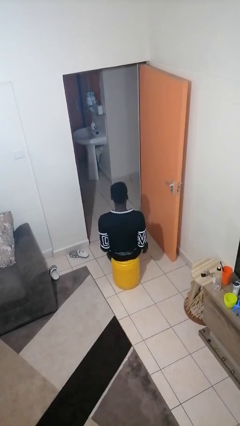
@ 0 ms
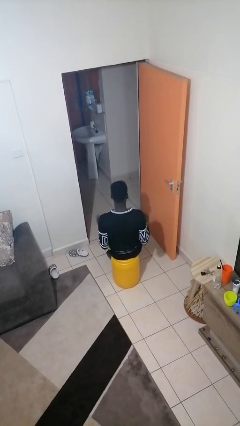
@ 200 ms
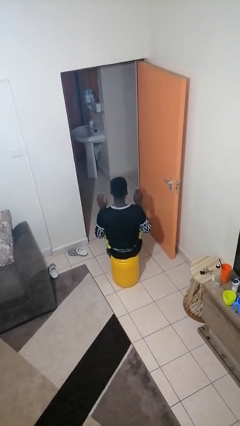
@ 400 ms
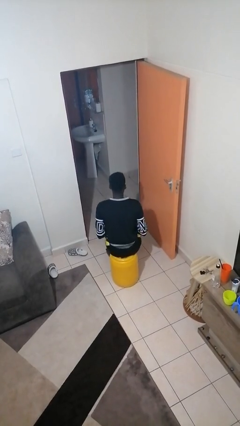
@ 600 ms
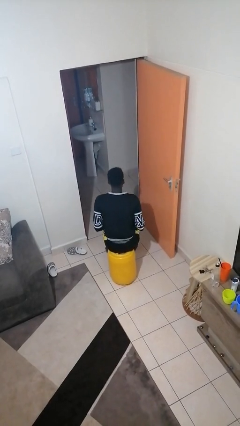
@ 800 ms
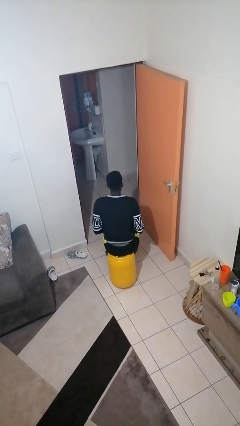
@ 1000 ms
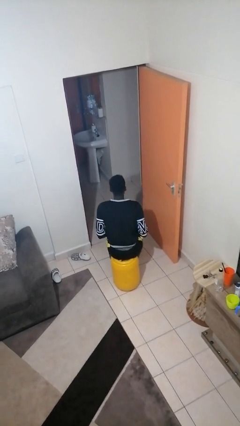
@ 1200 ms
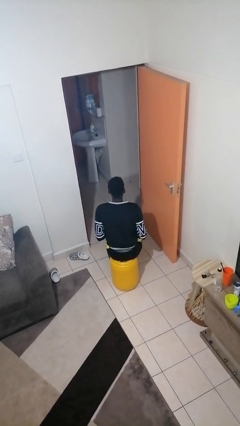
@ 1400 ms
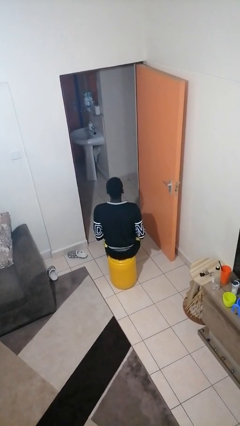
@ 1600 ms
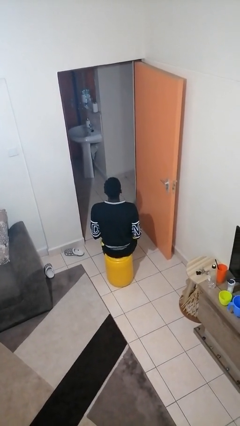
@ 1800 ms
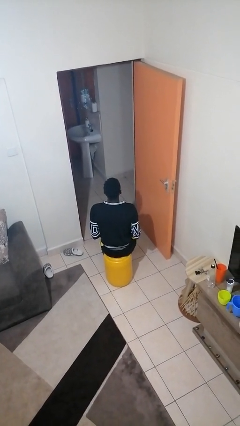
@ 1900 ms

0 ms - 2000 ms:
person slaps hands on thighs

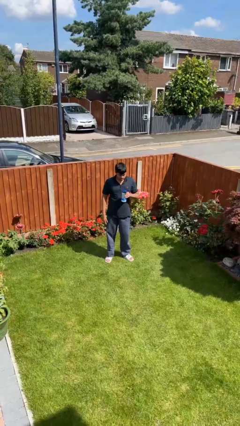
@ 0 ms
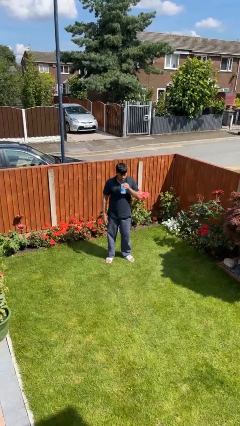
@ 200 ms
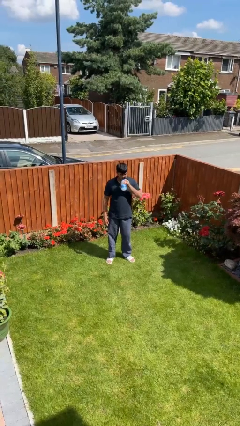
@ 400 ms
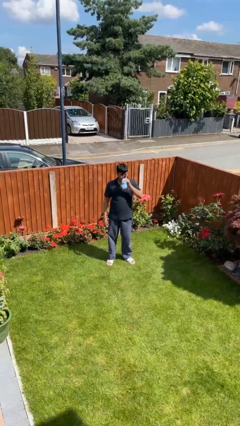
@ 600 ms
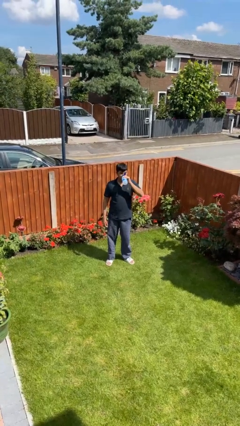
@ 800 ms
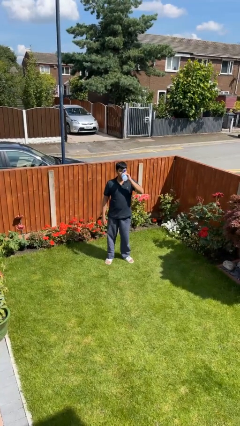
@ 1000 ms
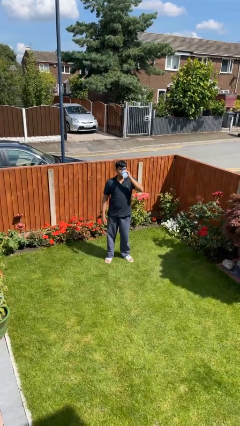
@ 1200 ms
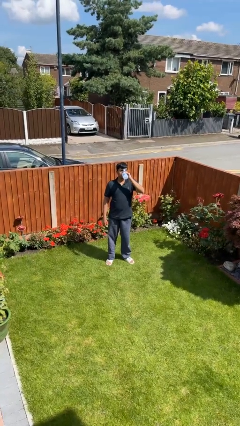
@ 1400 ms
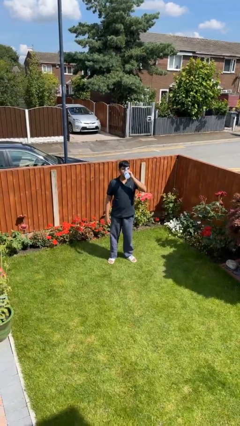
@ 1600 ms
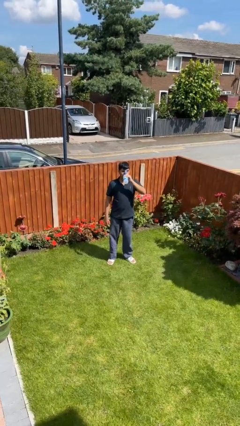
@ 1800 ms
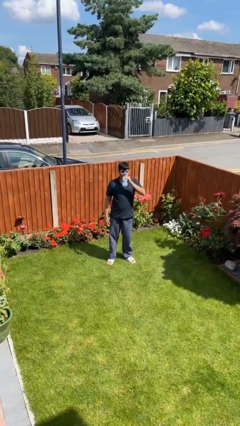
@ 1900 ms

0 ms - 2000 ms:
person drinks from bottle

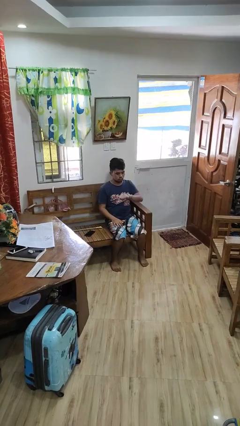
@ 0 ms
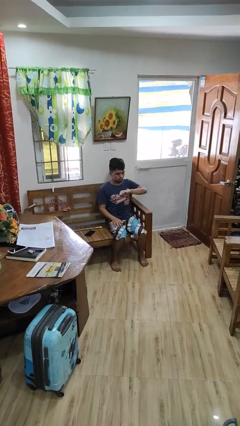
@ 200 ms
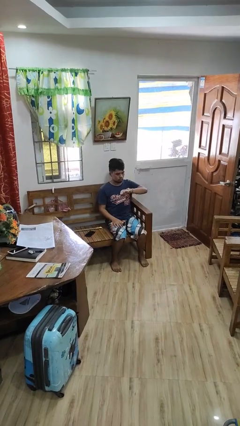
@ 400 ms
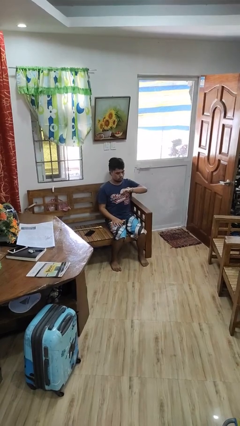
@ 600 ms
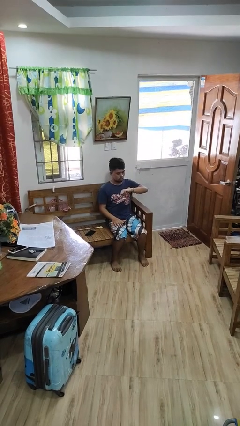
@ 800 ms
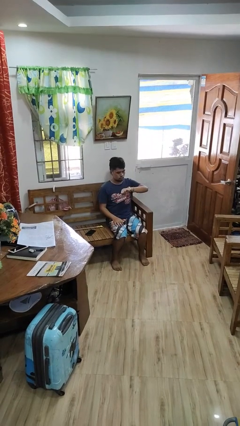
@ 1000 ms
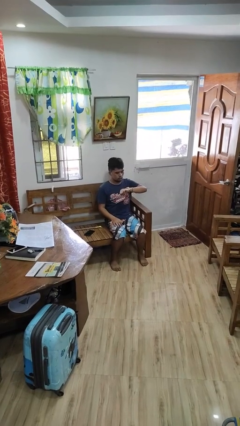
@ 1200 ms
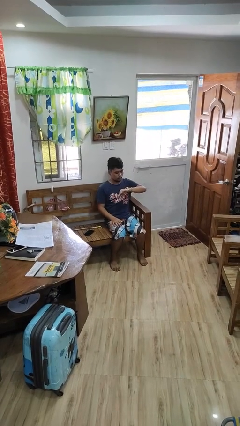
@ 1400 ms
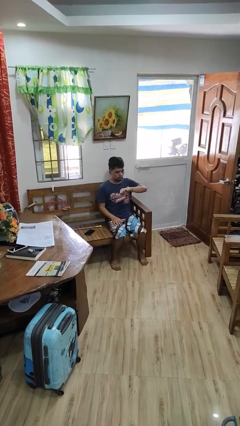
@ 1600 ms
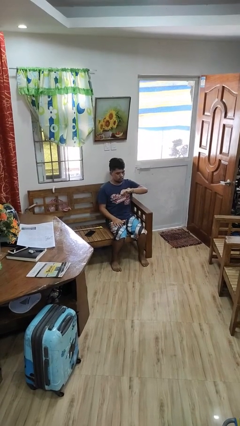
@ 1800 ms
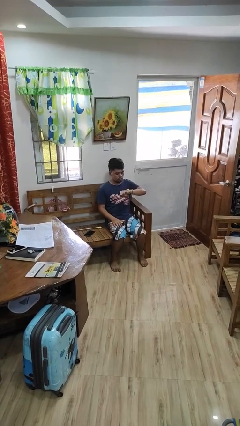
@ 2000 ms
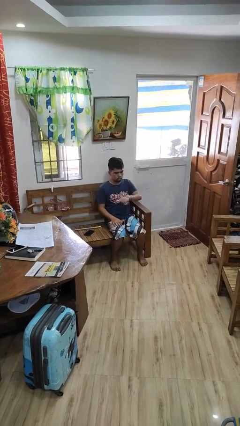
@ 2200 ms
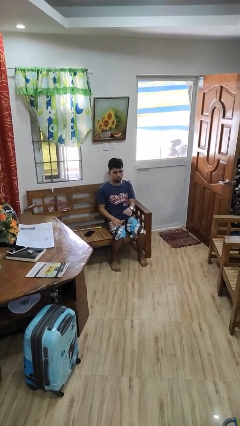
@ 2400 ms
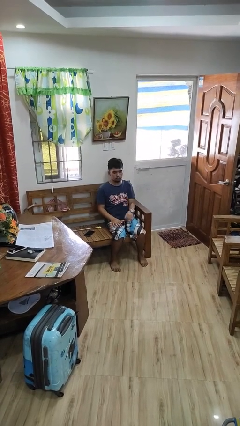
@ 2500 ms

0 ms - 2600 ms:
person looks at wristwatch

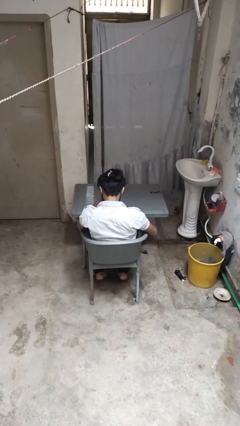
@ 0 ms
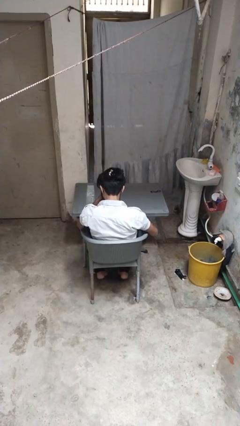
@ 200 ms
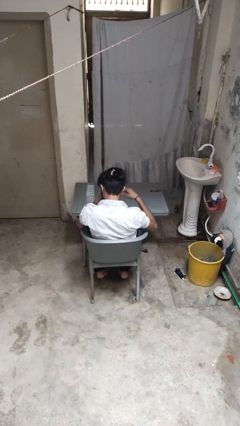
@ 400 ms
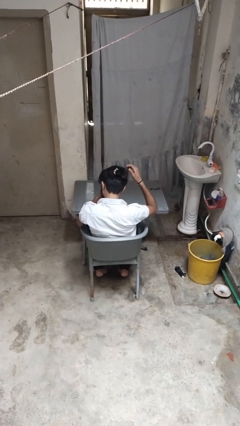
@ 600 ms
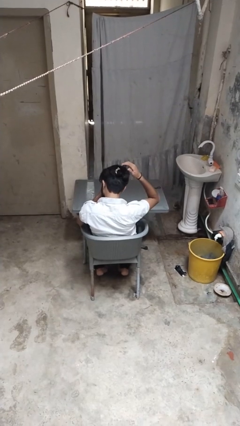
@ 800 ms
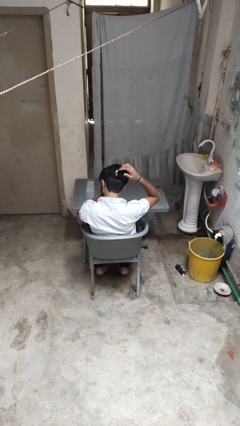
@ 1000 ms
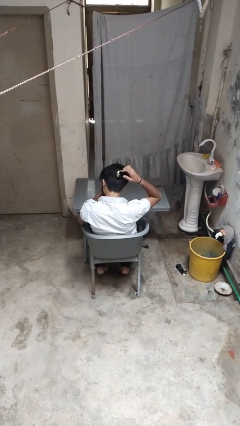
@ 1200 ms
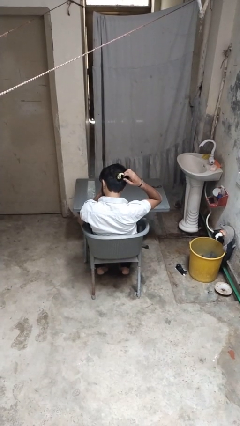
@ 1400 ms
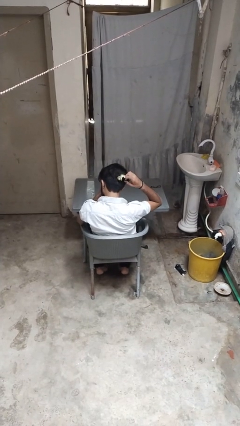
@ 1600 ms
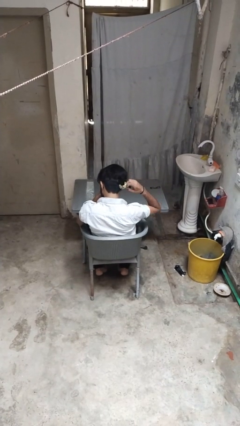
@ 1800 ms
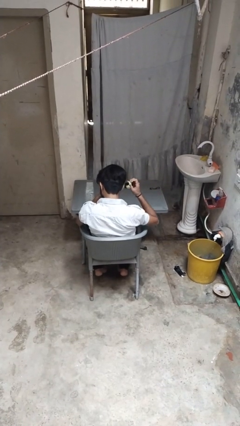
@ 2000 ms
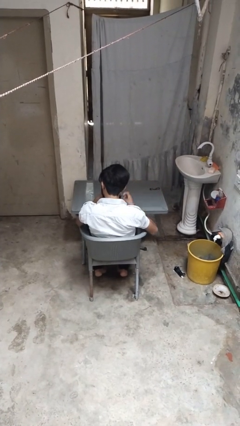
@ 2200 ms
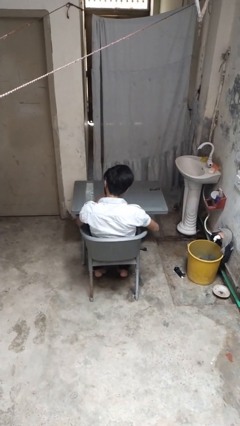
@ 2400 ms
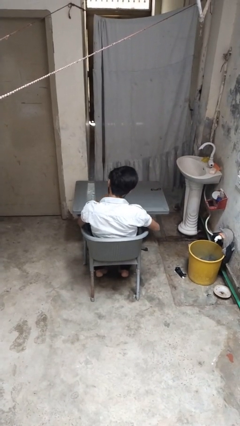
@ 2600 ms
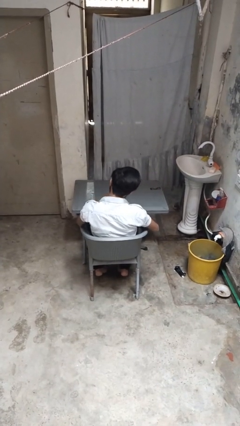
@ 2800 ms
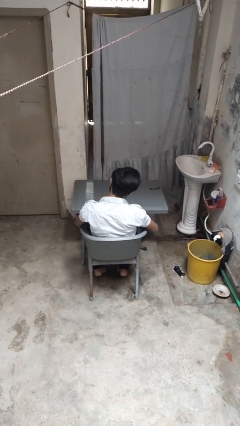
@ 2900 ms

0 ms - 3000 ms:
person takes off hairtie

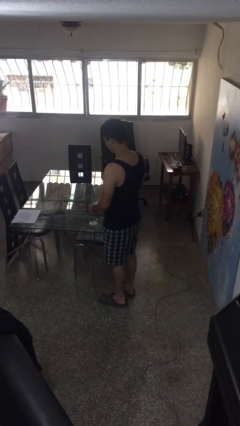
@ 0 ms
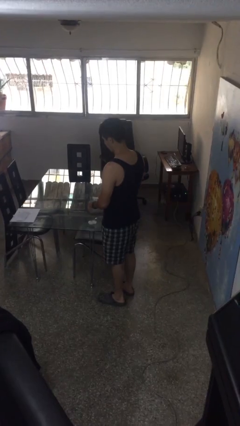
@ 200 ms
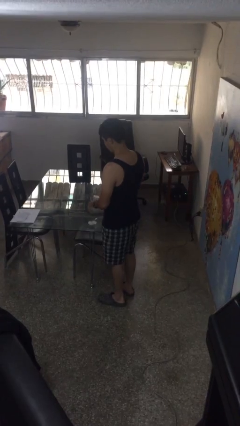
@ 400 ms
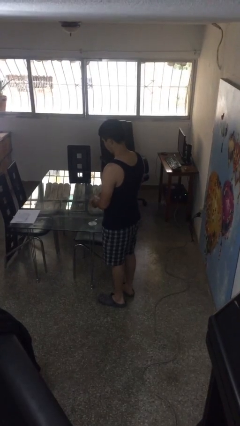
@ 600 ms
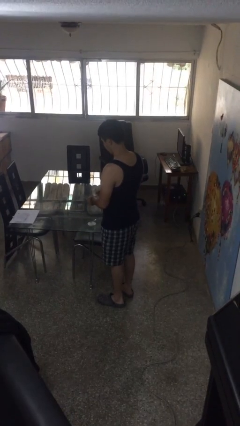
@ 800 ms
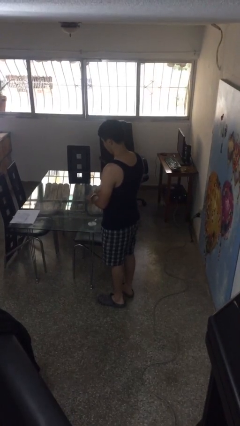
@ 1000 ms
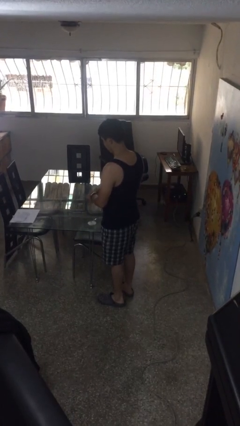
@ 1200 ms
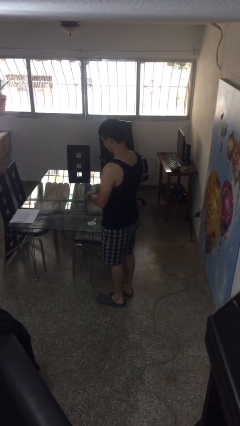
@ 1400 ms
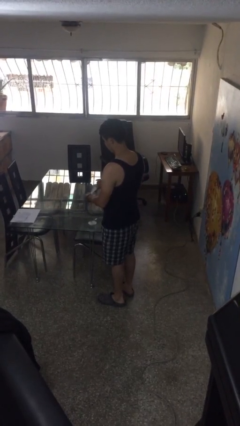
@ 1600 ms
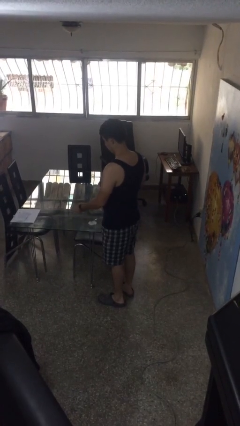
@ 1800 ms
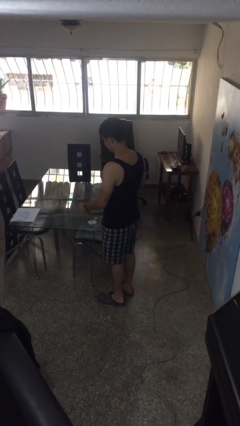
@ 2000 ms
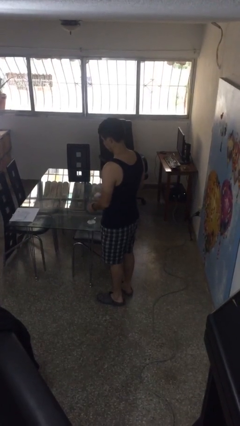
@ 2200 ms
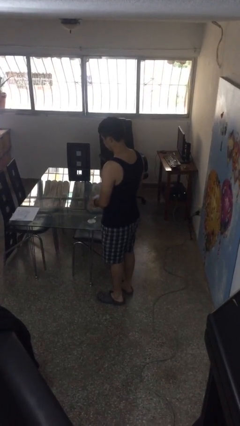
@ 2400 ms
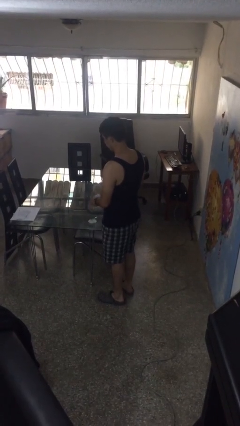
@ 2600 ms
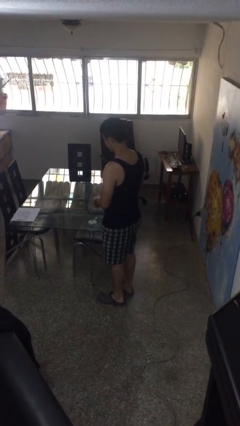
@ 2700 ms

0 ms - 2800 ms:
person tears paper

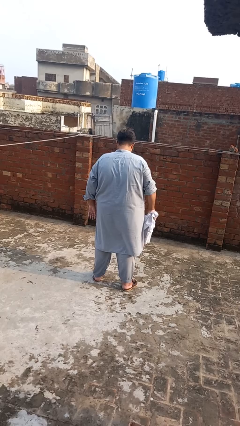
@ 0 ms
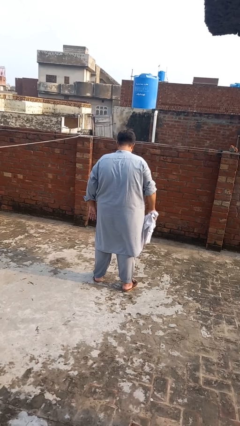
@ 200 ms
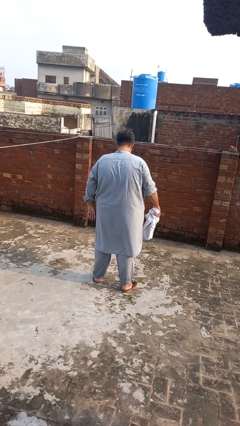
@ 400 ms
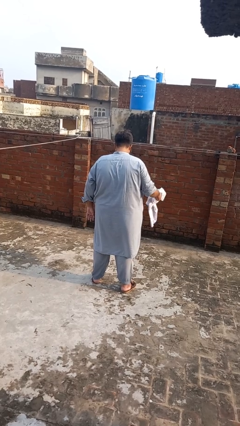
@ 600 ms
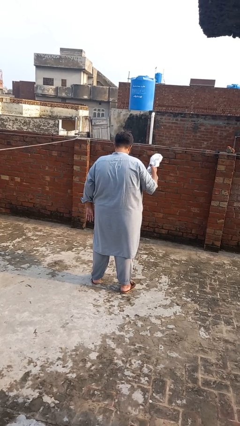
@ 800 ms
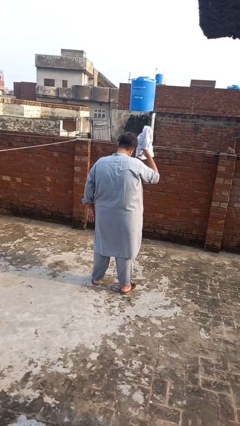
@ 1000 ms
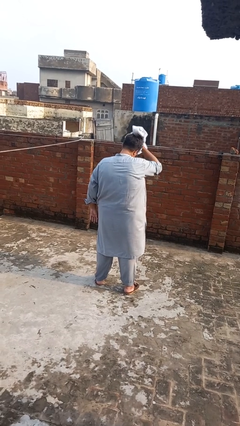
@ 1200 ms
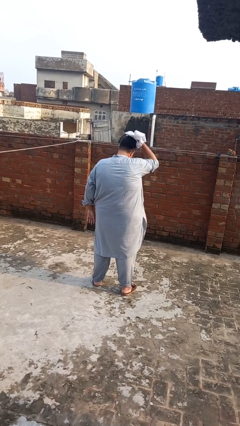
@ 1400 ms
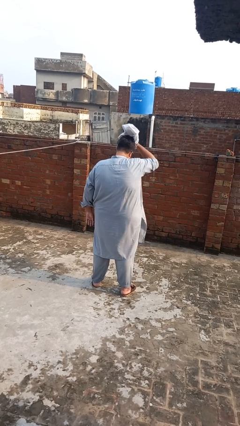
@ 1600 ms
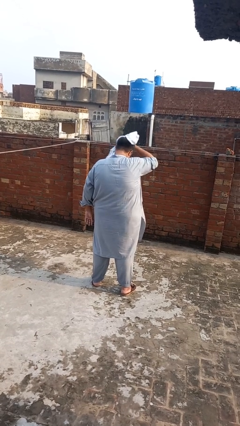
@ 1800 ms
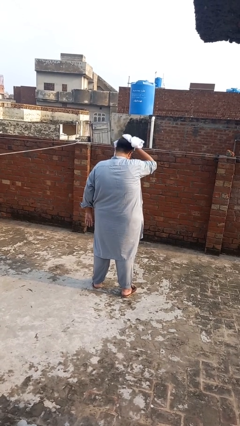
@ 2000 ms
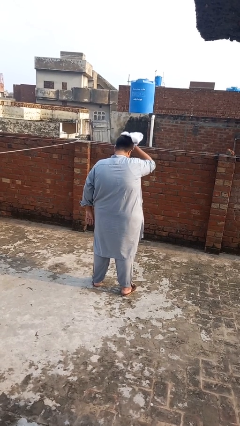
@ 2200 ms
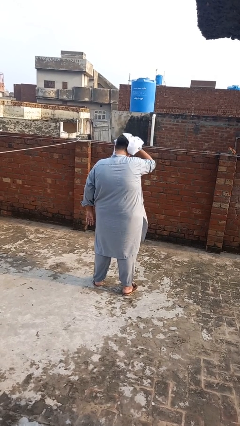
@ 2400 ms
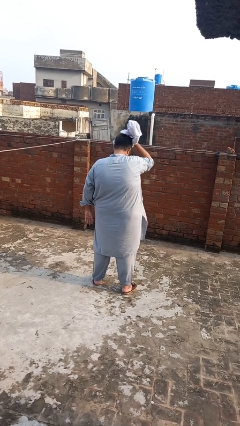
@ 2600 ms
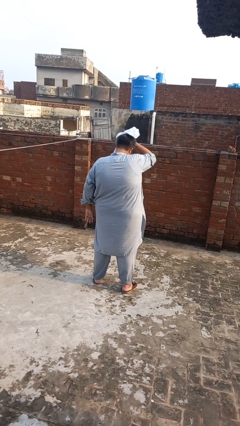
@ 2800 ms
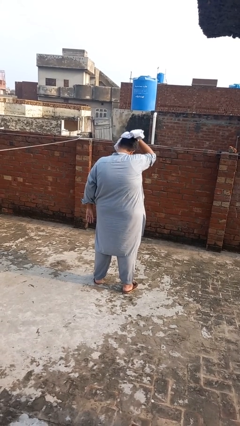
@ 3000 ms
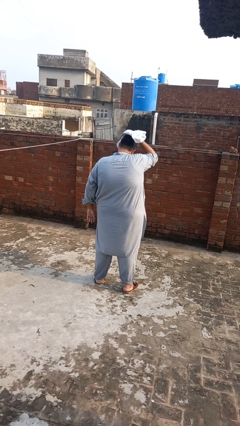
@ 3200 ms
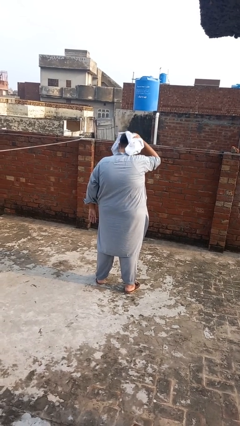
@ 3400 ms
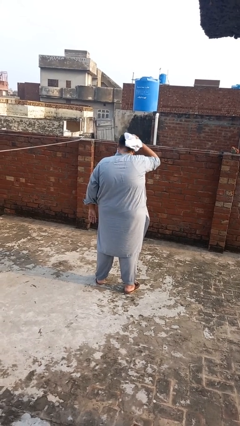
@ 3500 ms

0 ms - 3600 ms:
person dries hair with towel

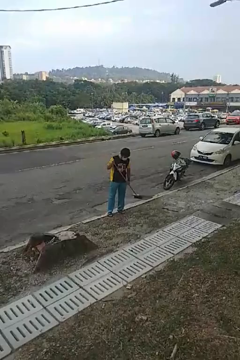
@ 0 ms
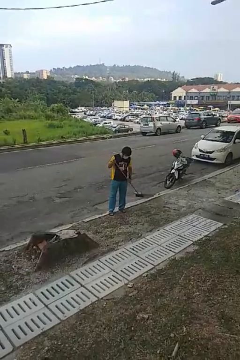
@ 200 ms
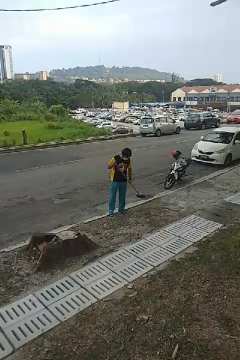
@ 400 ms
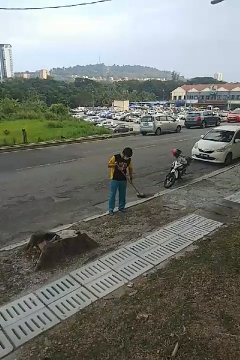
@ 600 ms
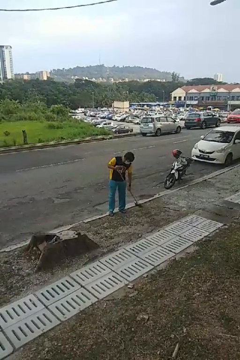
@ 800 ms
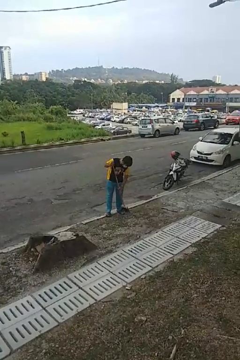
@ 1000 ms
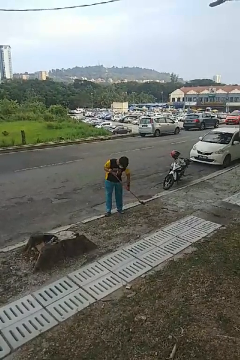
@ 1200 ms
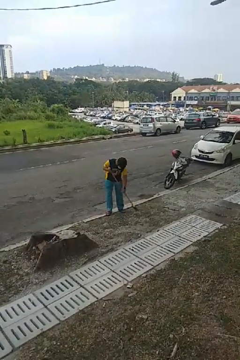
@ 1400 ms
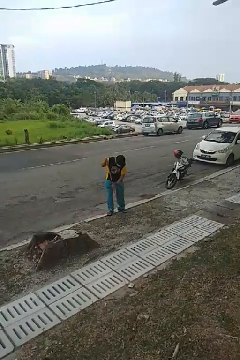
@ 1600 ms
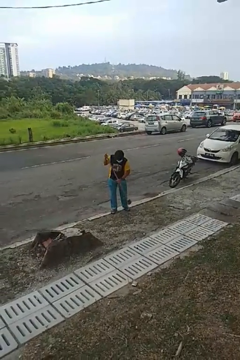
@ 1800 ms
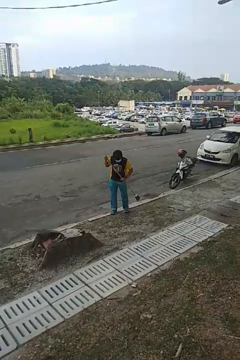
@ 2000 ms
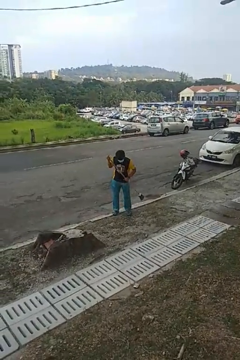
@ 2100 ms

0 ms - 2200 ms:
person sweeps floor
